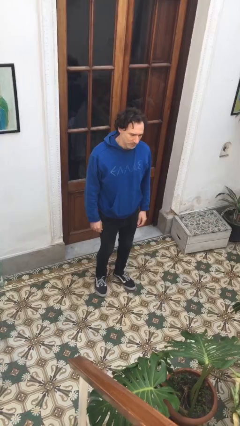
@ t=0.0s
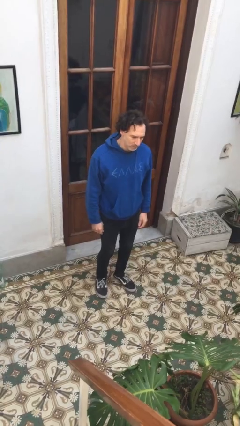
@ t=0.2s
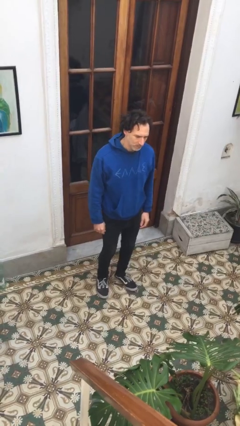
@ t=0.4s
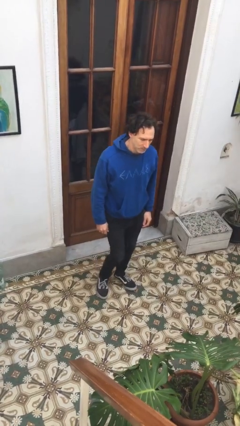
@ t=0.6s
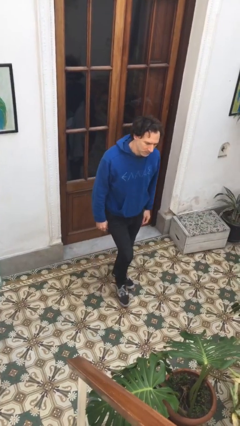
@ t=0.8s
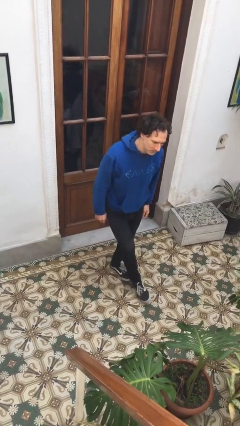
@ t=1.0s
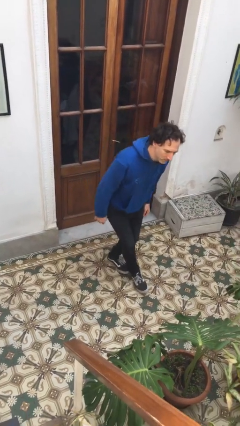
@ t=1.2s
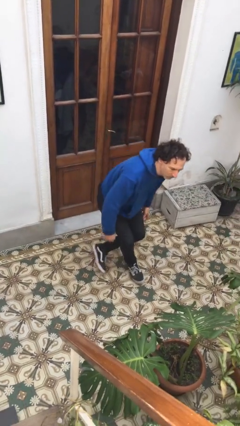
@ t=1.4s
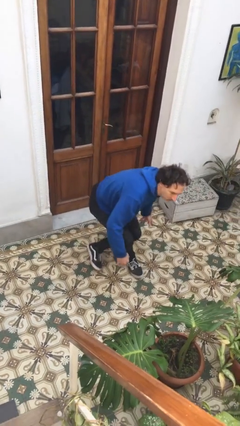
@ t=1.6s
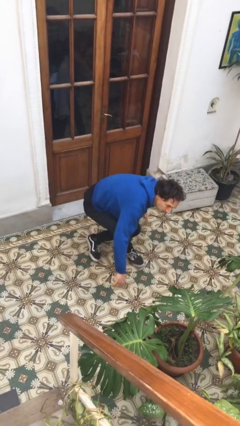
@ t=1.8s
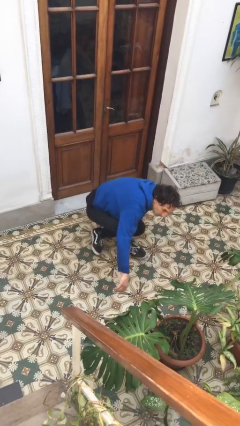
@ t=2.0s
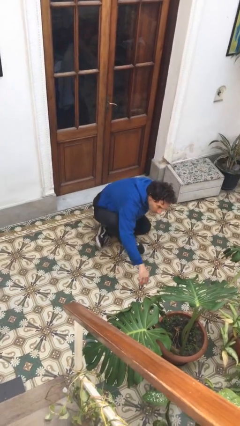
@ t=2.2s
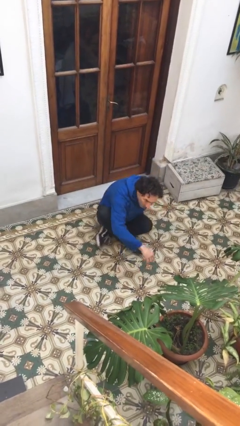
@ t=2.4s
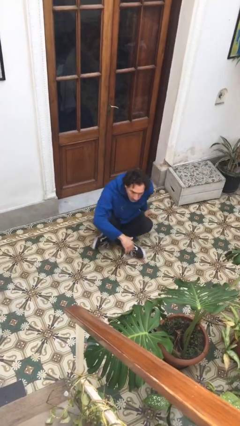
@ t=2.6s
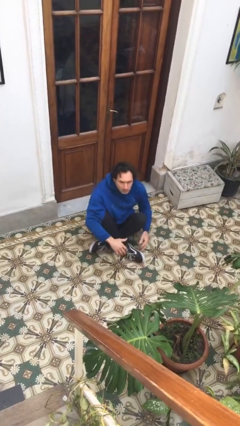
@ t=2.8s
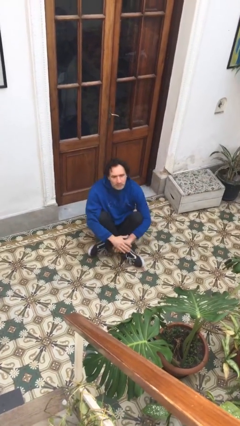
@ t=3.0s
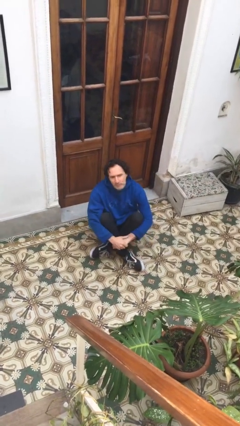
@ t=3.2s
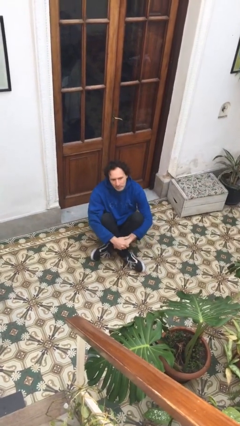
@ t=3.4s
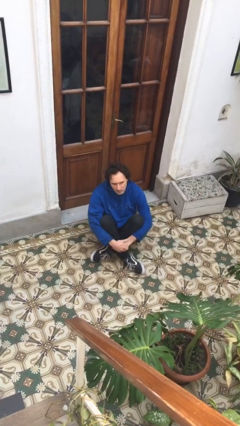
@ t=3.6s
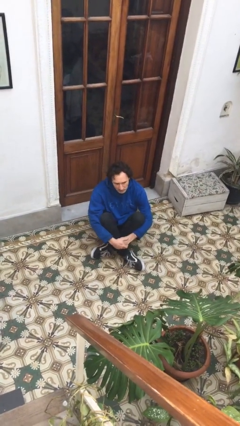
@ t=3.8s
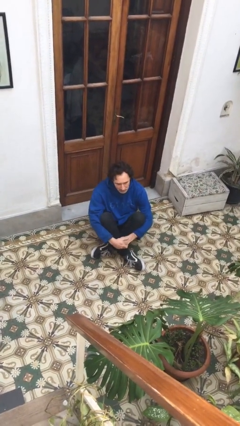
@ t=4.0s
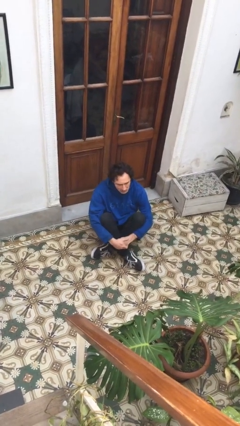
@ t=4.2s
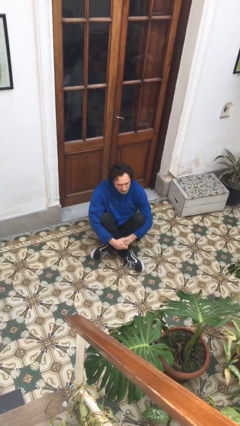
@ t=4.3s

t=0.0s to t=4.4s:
person sits crisscross

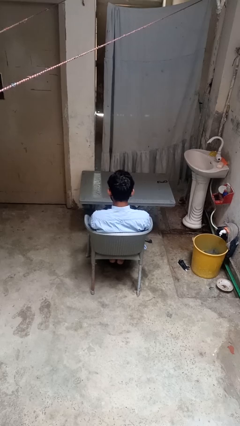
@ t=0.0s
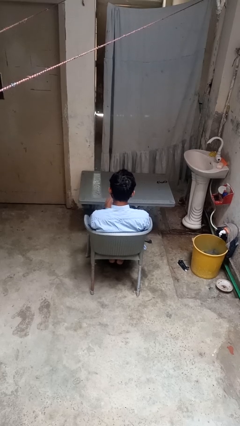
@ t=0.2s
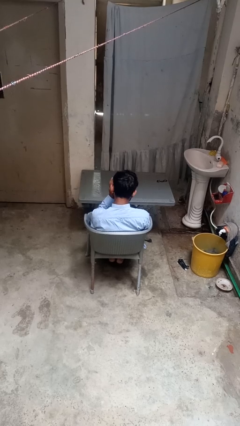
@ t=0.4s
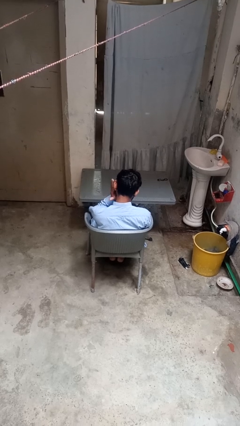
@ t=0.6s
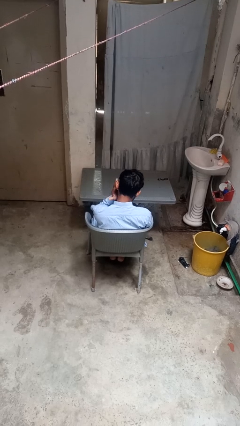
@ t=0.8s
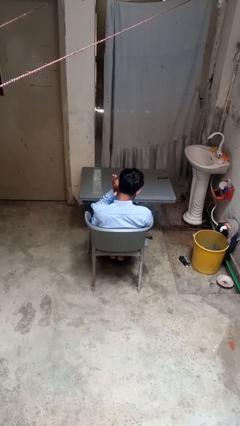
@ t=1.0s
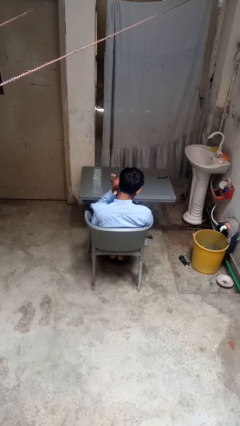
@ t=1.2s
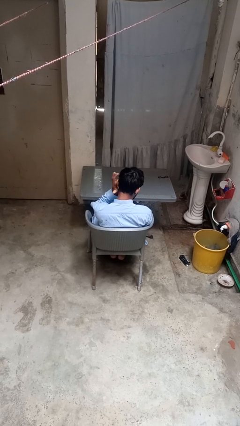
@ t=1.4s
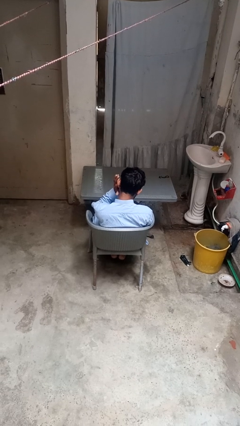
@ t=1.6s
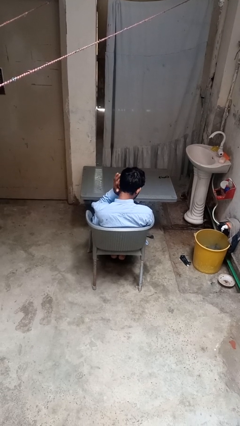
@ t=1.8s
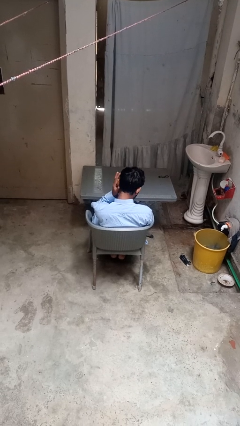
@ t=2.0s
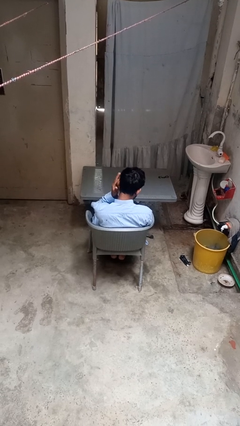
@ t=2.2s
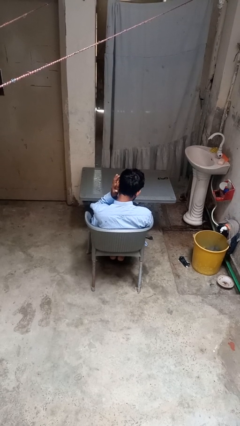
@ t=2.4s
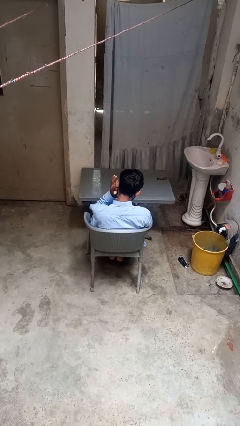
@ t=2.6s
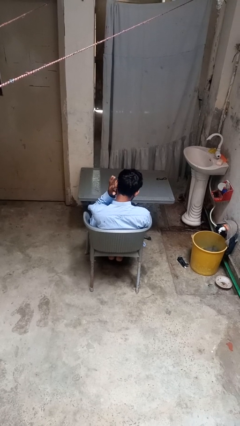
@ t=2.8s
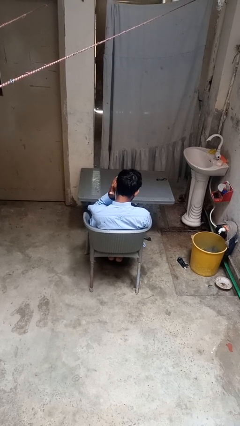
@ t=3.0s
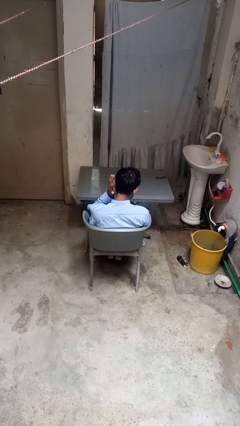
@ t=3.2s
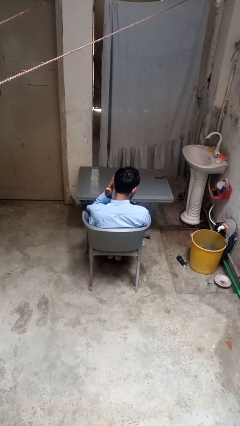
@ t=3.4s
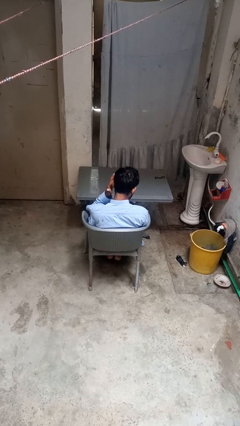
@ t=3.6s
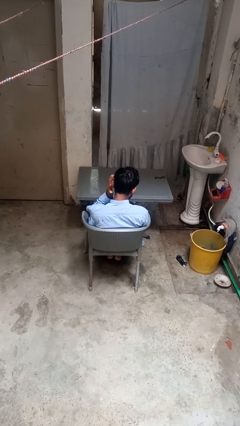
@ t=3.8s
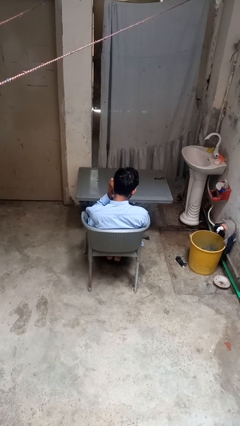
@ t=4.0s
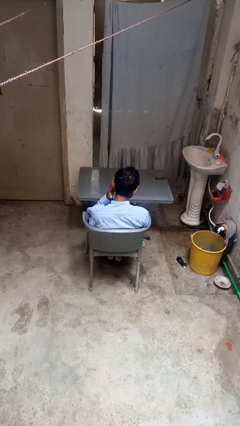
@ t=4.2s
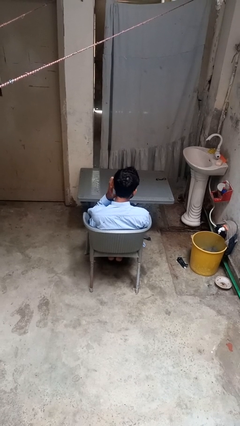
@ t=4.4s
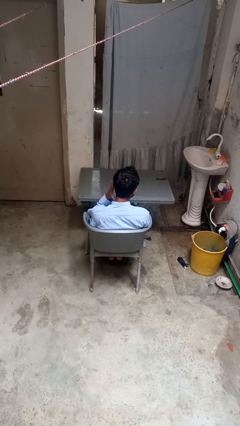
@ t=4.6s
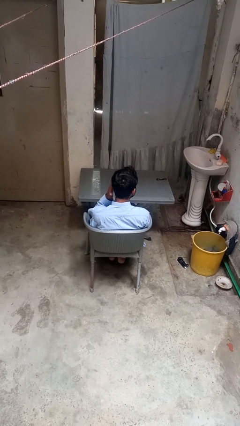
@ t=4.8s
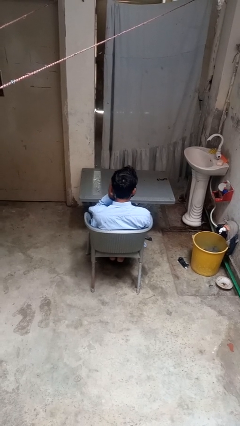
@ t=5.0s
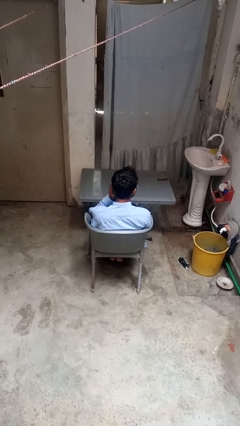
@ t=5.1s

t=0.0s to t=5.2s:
person puts fingers in ear

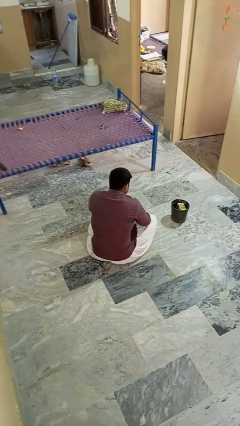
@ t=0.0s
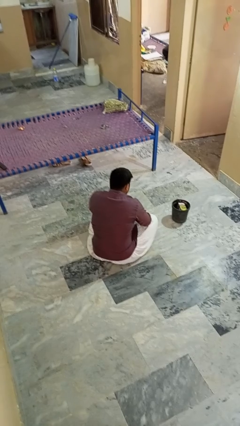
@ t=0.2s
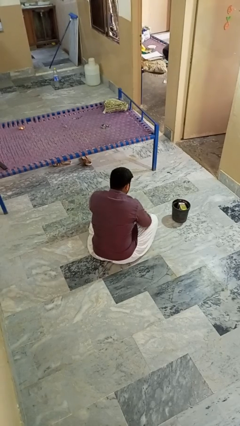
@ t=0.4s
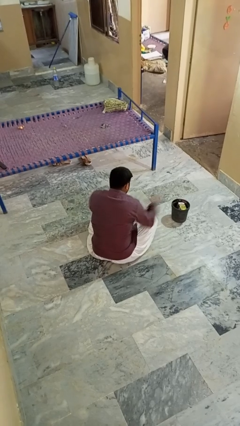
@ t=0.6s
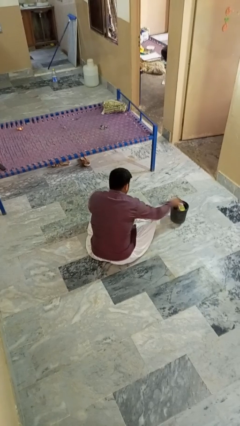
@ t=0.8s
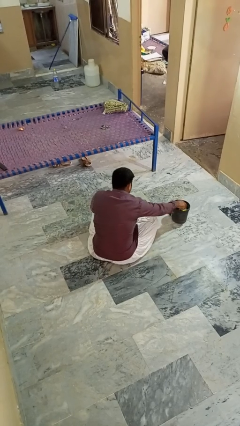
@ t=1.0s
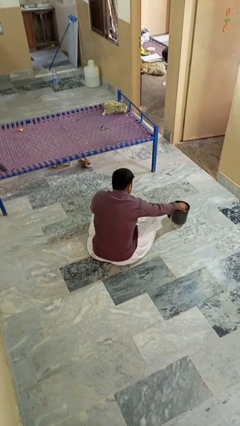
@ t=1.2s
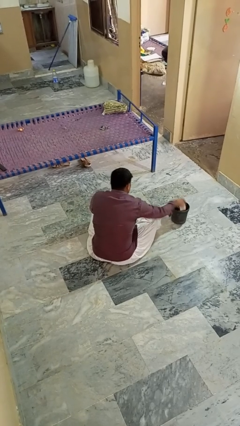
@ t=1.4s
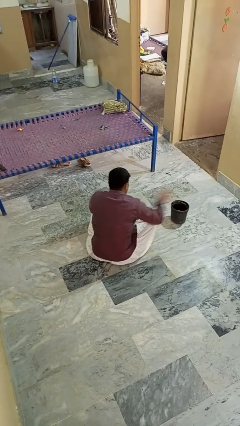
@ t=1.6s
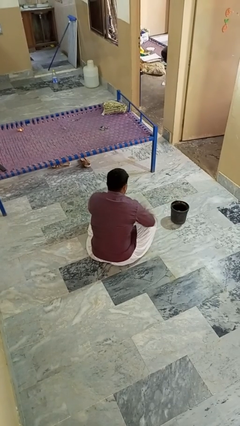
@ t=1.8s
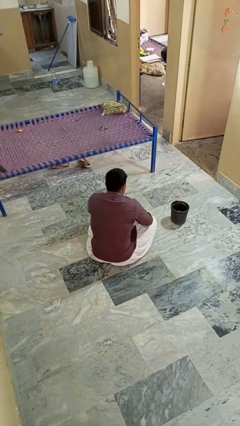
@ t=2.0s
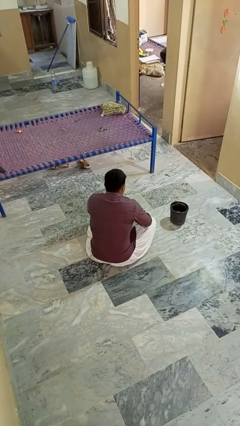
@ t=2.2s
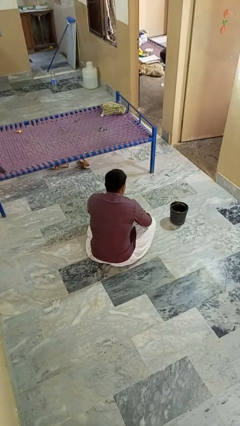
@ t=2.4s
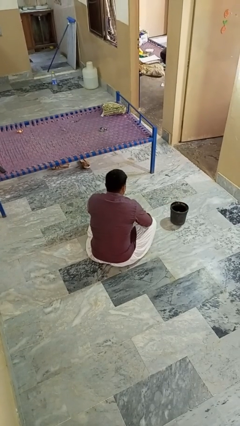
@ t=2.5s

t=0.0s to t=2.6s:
person takes object from basket

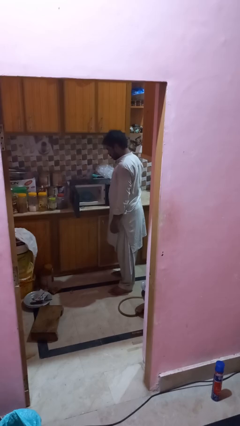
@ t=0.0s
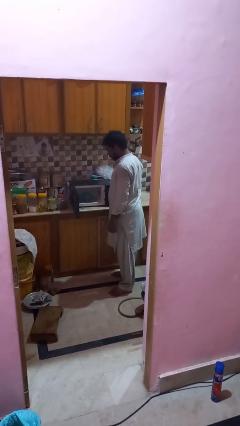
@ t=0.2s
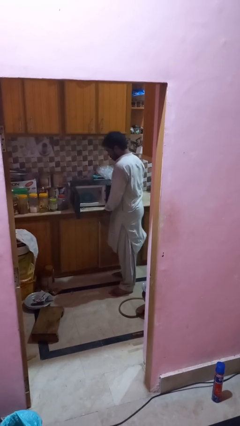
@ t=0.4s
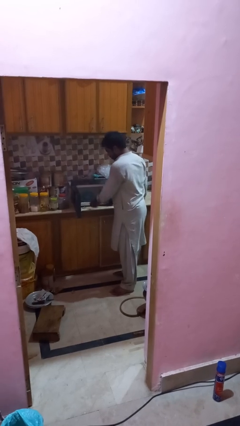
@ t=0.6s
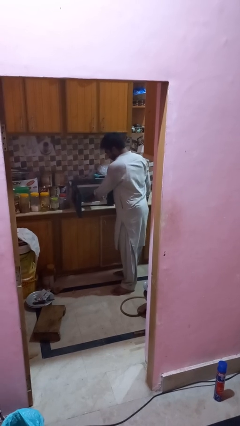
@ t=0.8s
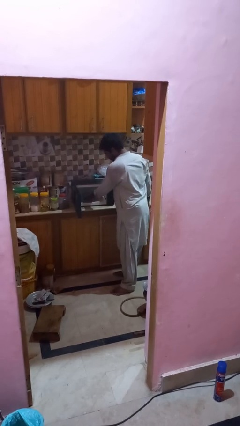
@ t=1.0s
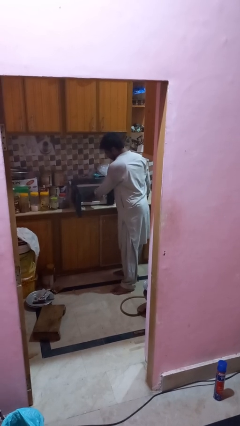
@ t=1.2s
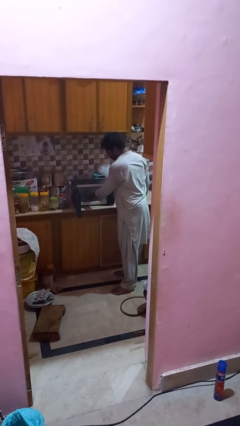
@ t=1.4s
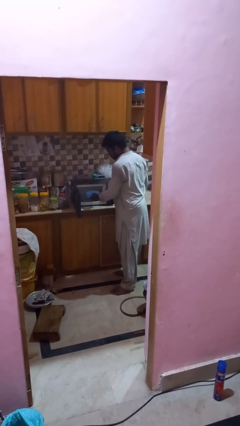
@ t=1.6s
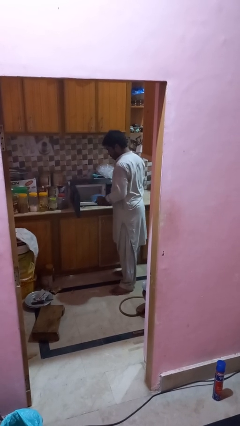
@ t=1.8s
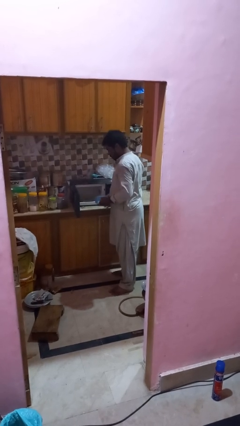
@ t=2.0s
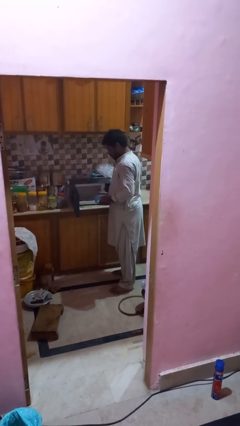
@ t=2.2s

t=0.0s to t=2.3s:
person takes object from microwave

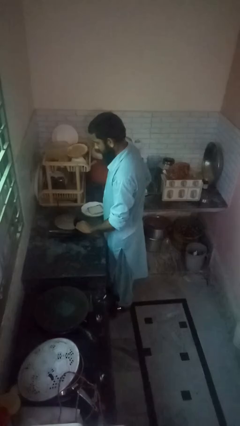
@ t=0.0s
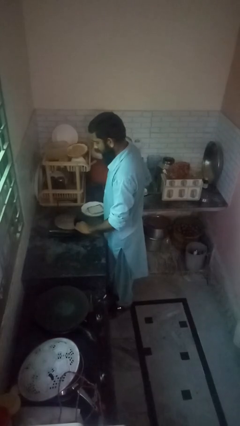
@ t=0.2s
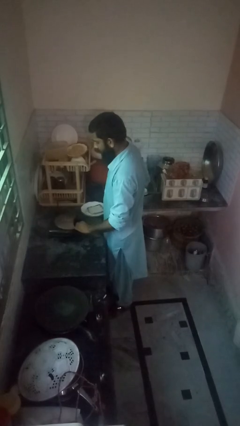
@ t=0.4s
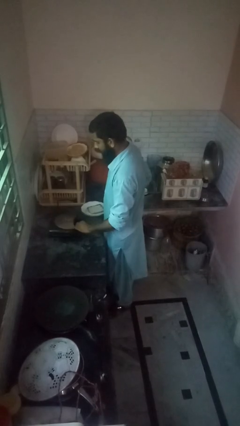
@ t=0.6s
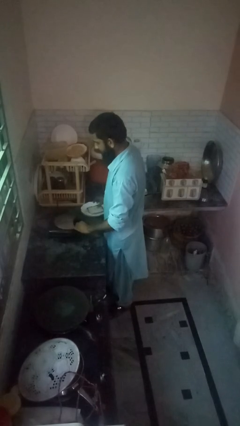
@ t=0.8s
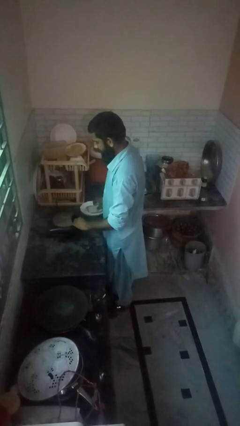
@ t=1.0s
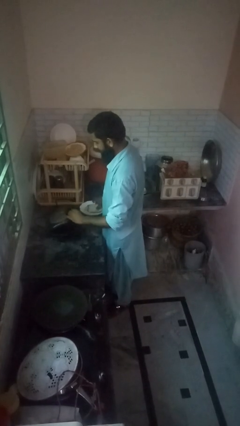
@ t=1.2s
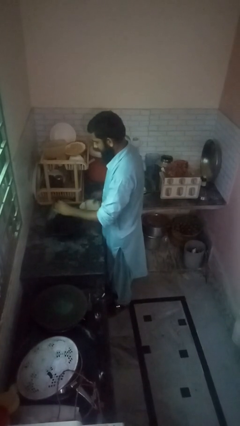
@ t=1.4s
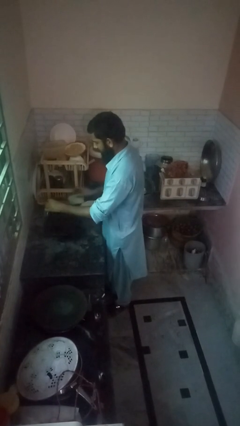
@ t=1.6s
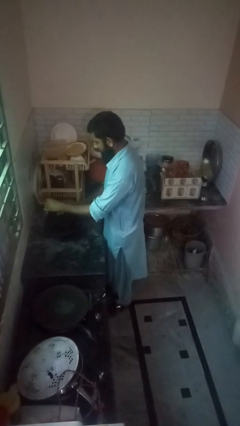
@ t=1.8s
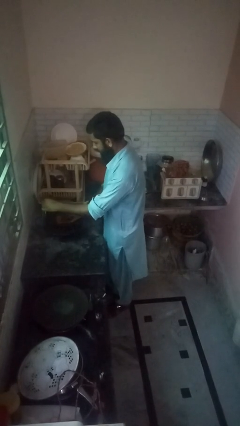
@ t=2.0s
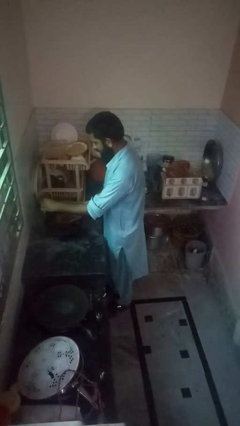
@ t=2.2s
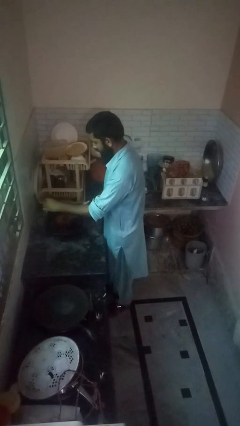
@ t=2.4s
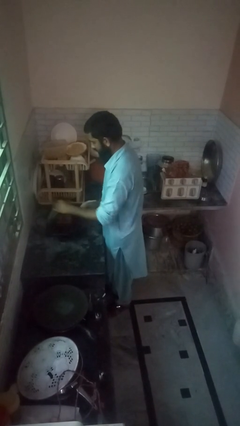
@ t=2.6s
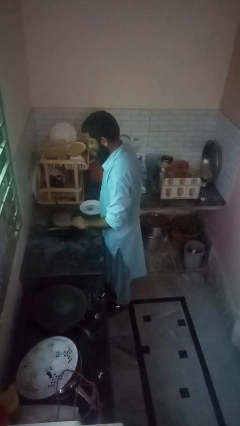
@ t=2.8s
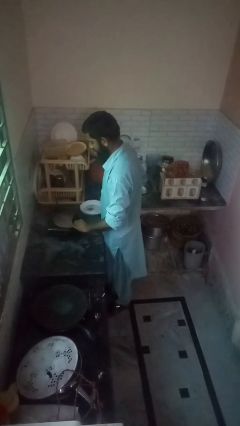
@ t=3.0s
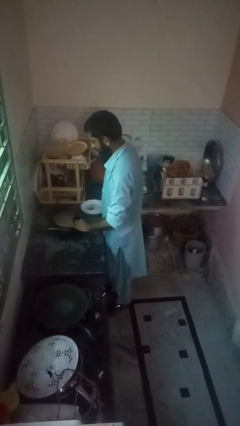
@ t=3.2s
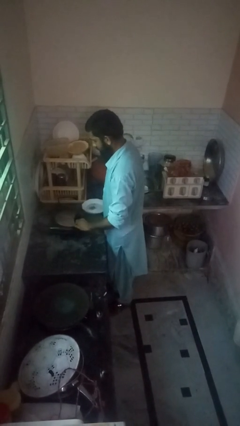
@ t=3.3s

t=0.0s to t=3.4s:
person puts object into toaster
